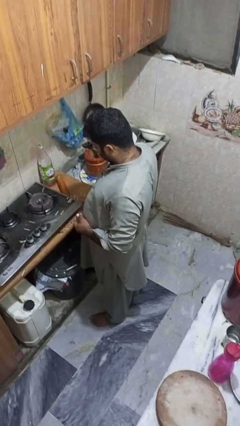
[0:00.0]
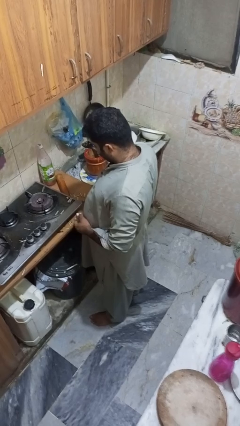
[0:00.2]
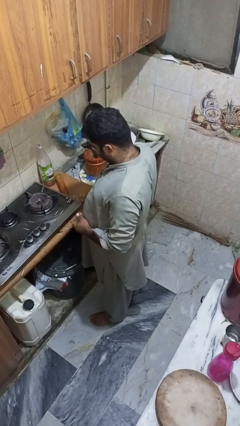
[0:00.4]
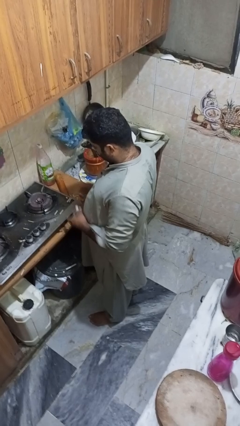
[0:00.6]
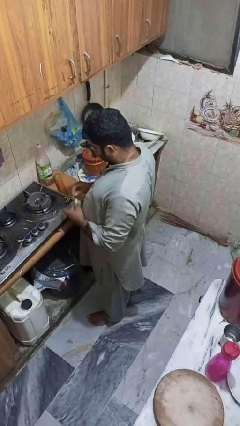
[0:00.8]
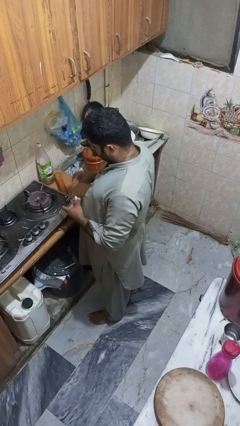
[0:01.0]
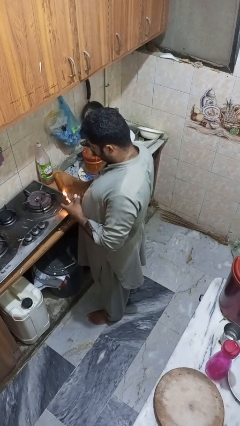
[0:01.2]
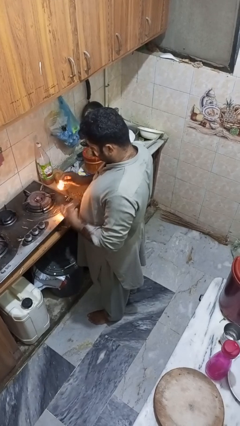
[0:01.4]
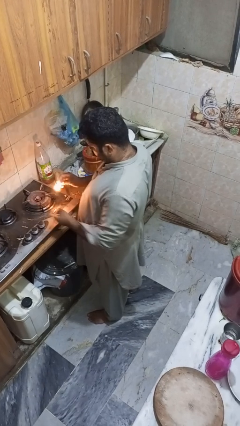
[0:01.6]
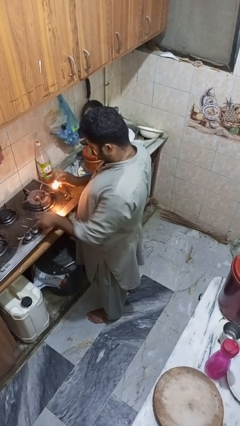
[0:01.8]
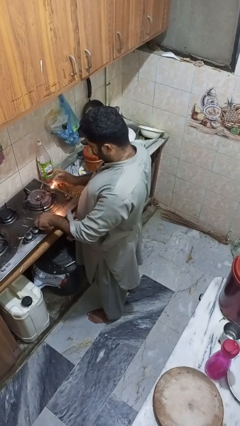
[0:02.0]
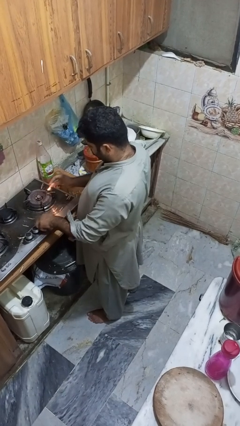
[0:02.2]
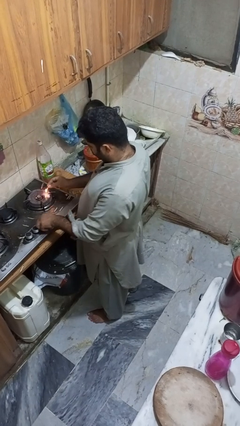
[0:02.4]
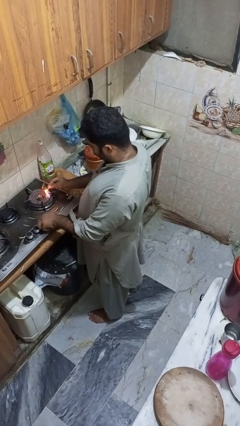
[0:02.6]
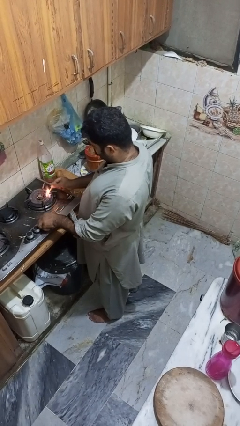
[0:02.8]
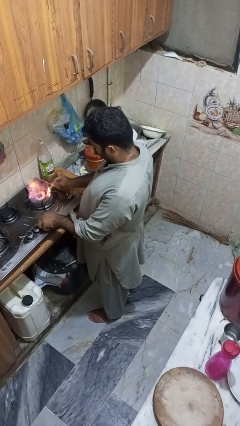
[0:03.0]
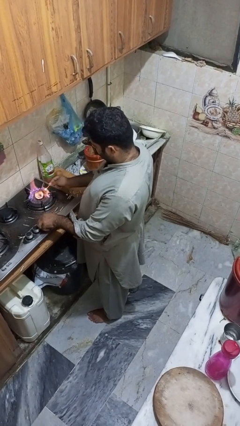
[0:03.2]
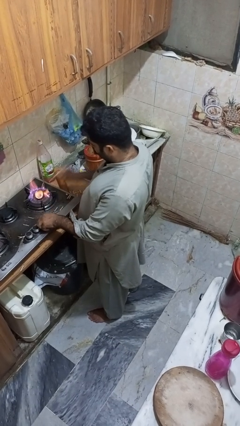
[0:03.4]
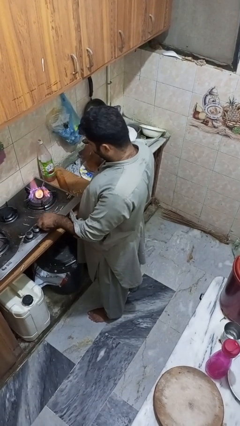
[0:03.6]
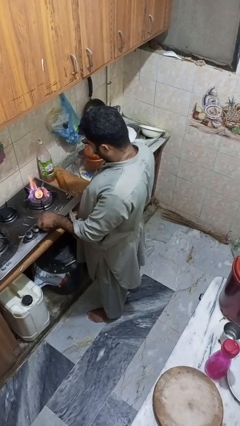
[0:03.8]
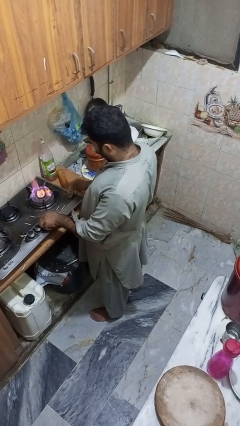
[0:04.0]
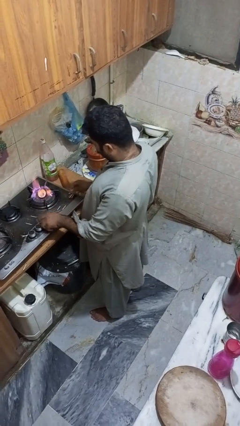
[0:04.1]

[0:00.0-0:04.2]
person turns on stovetop

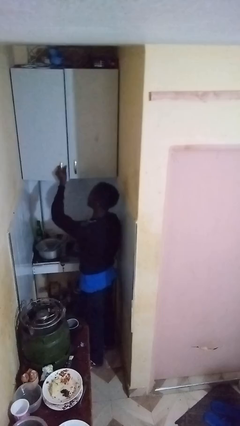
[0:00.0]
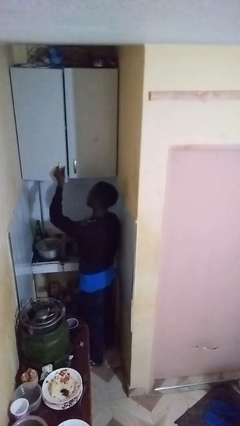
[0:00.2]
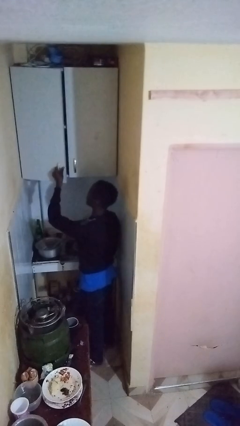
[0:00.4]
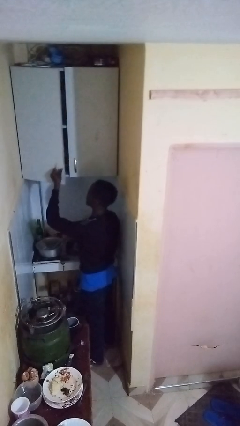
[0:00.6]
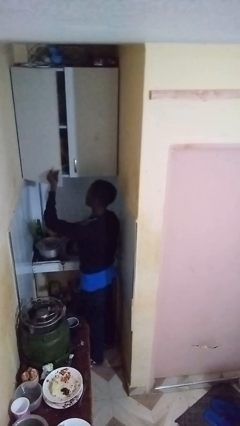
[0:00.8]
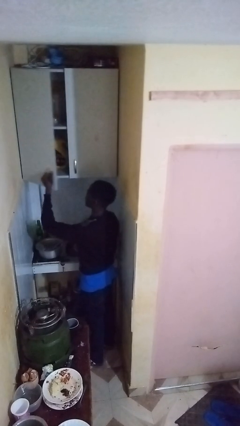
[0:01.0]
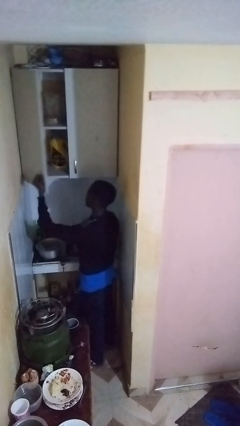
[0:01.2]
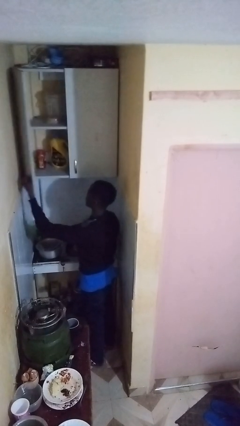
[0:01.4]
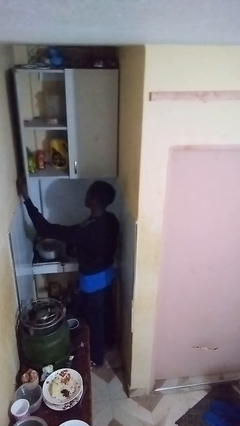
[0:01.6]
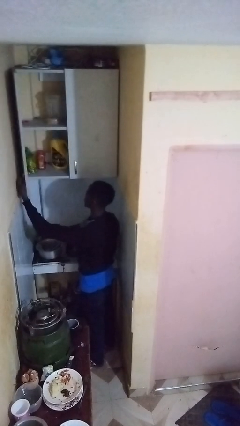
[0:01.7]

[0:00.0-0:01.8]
person opens kitchen drawer

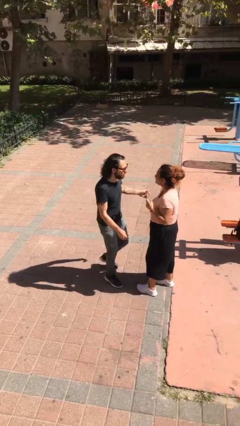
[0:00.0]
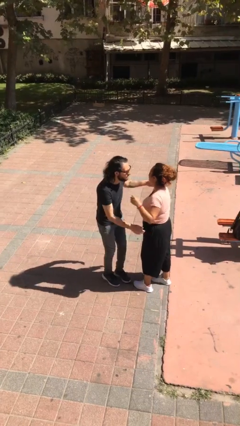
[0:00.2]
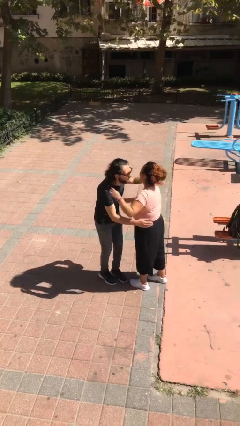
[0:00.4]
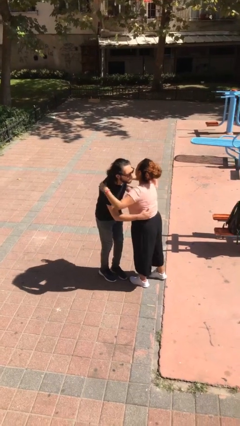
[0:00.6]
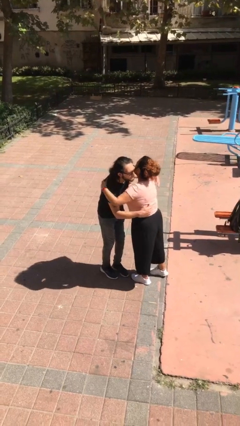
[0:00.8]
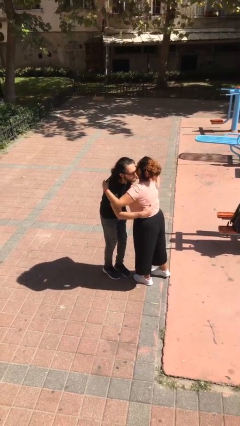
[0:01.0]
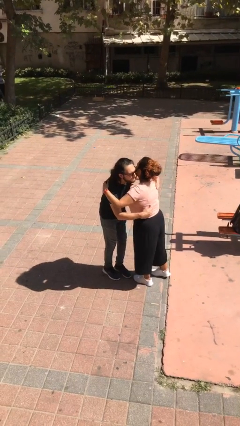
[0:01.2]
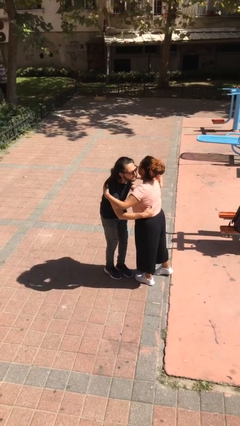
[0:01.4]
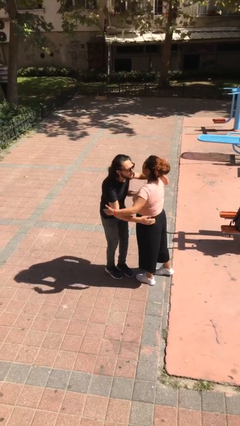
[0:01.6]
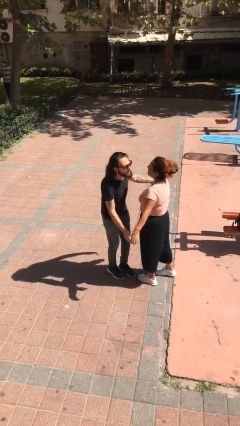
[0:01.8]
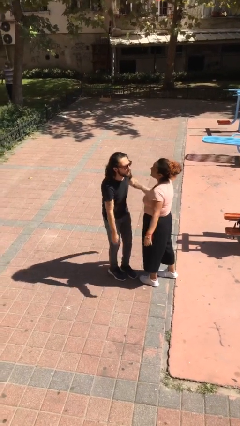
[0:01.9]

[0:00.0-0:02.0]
person embraces person

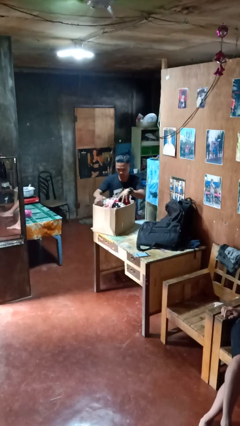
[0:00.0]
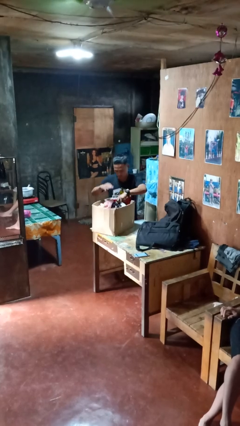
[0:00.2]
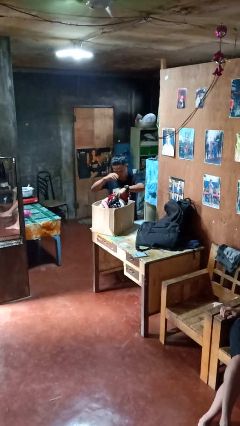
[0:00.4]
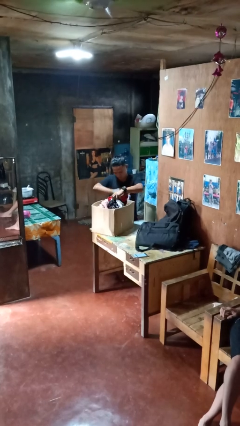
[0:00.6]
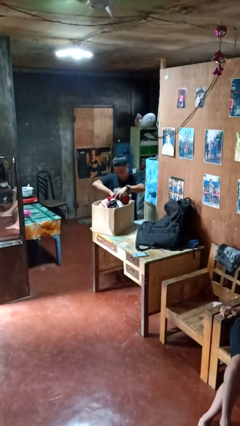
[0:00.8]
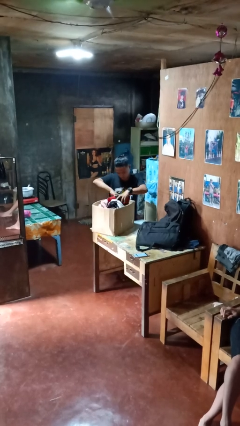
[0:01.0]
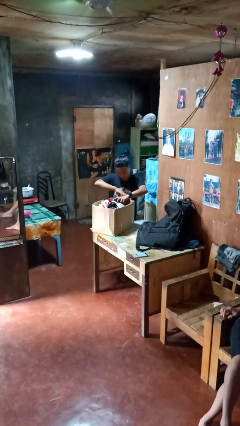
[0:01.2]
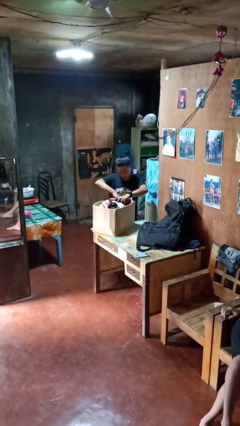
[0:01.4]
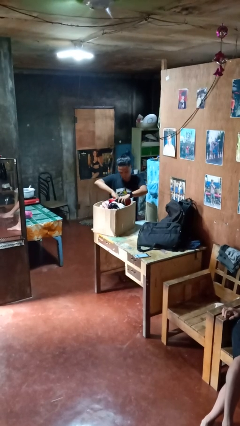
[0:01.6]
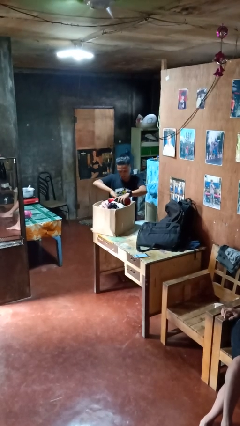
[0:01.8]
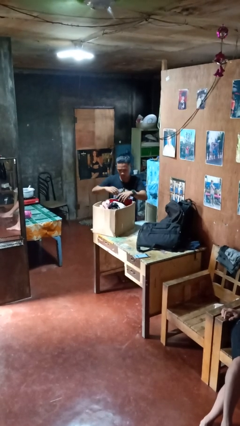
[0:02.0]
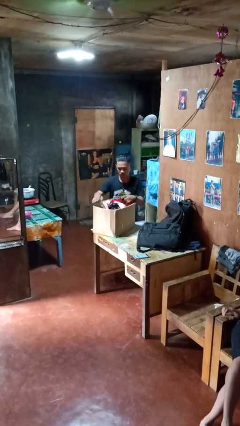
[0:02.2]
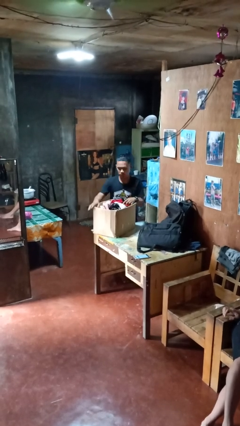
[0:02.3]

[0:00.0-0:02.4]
person searches in box

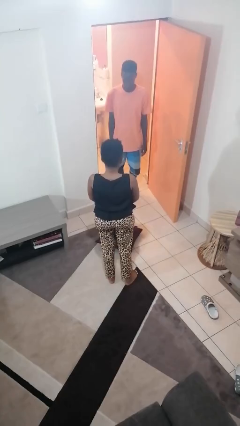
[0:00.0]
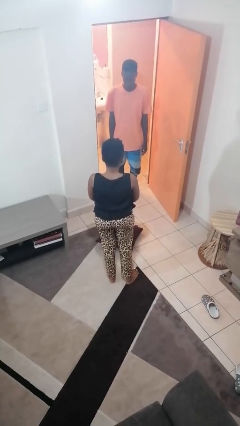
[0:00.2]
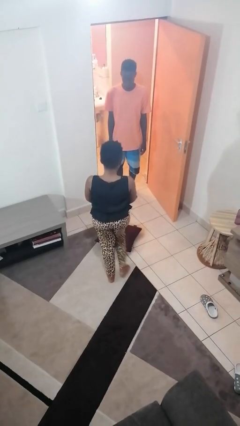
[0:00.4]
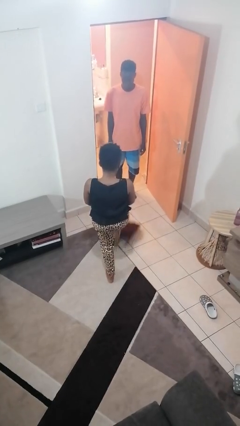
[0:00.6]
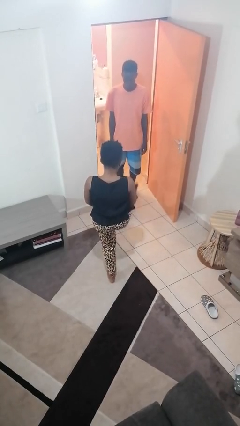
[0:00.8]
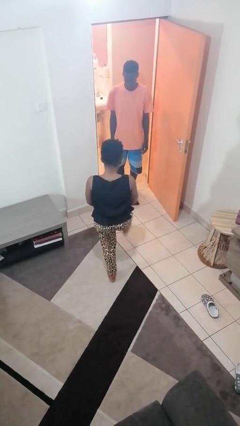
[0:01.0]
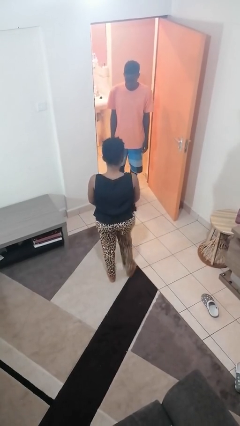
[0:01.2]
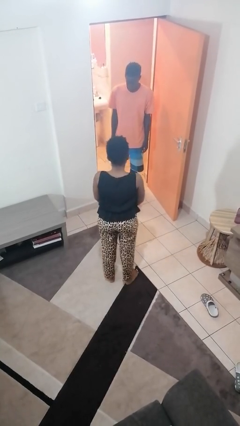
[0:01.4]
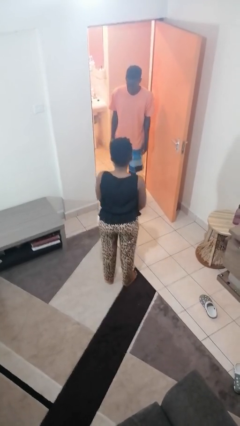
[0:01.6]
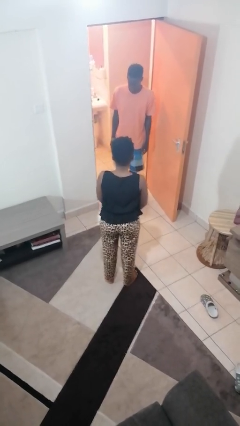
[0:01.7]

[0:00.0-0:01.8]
person kicks object to person

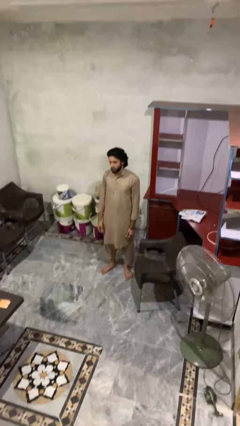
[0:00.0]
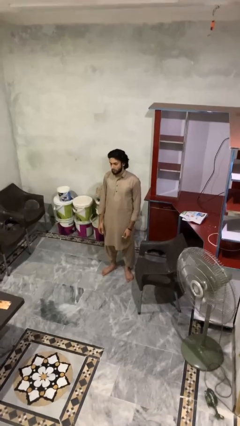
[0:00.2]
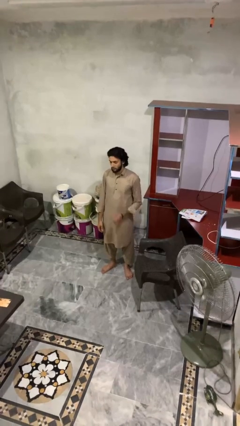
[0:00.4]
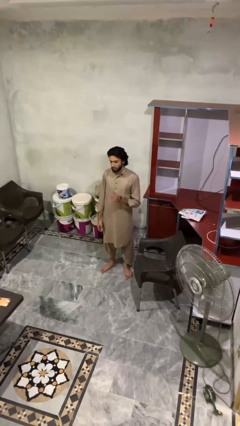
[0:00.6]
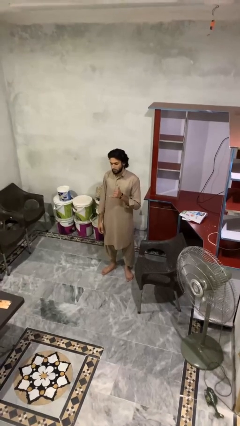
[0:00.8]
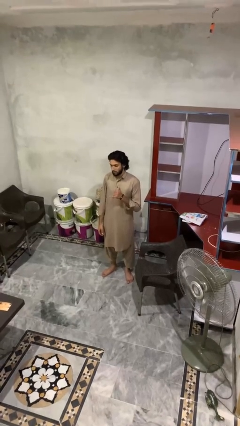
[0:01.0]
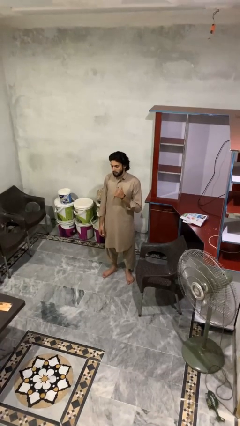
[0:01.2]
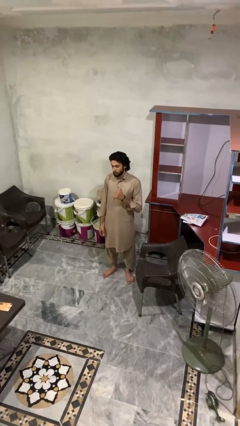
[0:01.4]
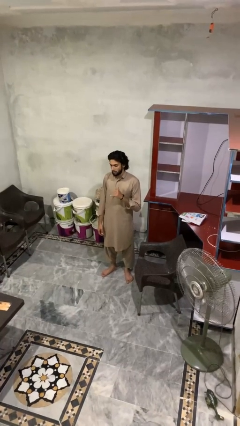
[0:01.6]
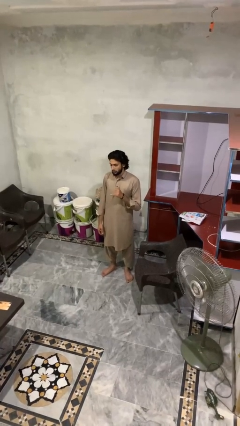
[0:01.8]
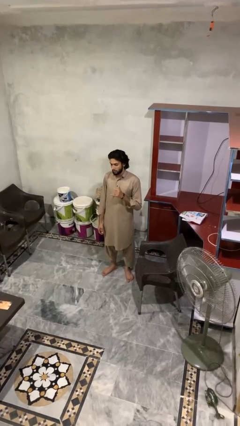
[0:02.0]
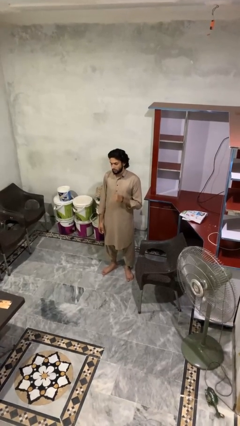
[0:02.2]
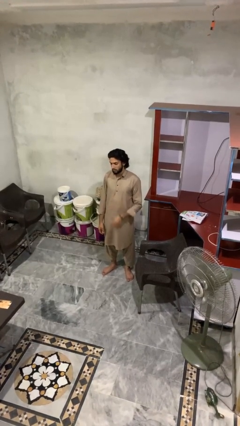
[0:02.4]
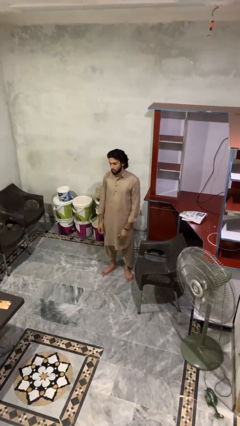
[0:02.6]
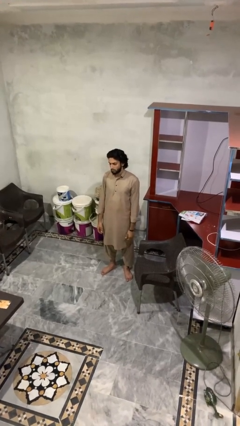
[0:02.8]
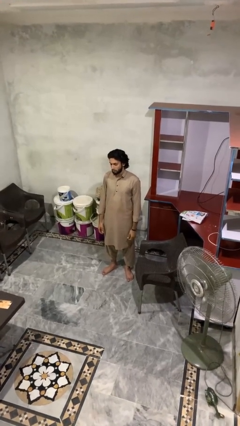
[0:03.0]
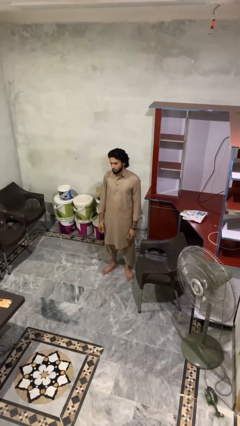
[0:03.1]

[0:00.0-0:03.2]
person gestures hang loose

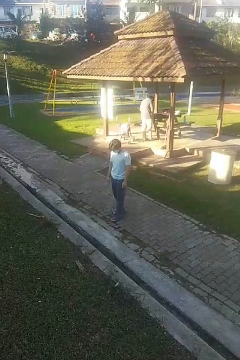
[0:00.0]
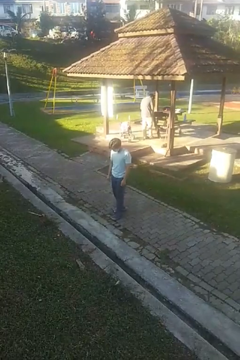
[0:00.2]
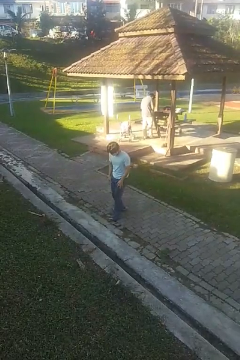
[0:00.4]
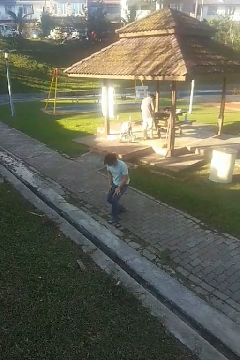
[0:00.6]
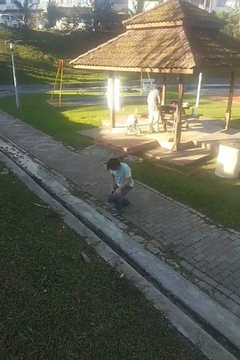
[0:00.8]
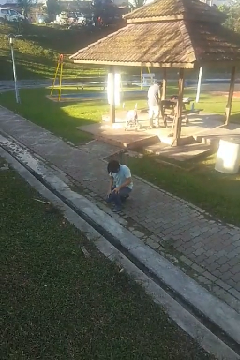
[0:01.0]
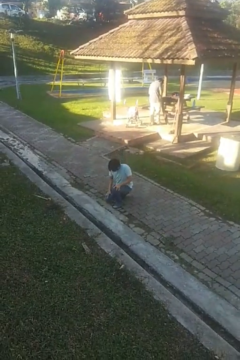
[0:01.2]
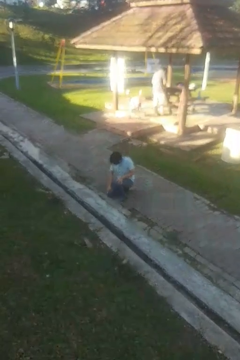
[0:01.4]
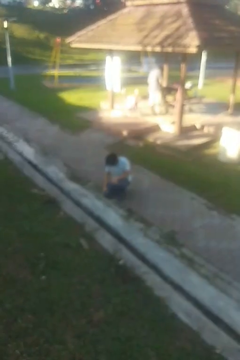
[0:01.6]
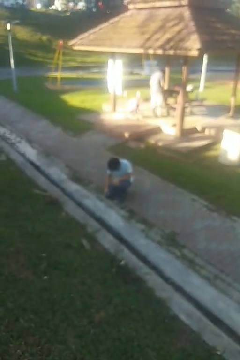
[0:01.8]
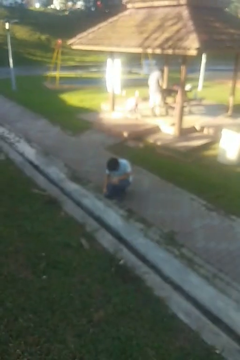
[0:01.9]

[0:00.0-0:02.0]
person kneels
